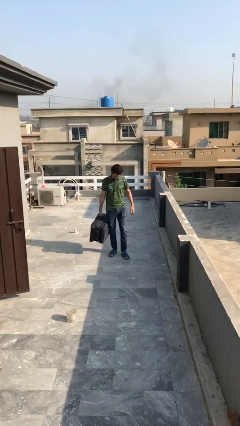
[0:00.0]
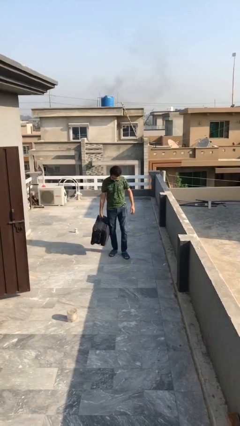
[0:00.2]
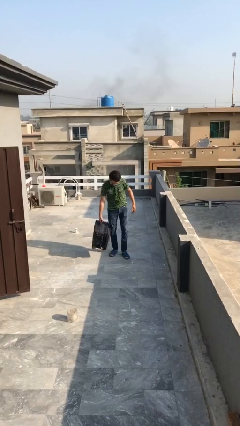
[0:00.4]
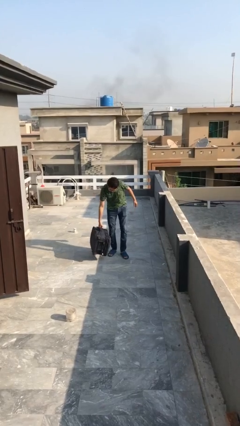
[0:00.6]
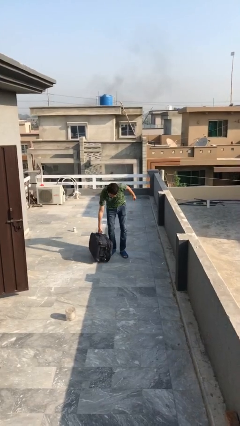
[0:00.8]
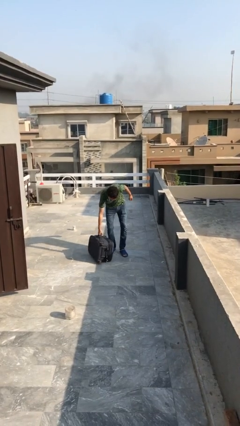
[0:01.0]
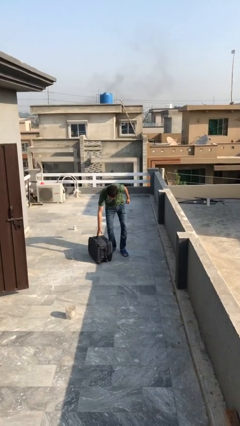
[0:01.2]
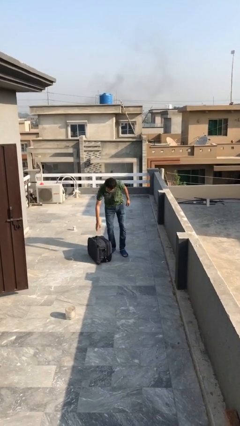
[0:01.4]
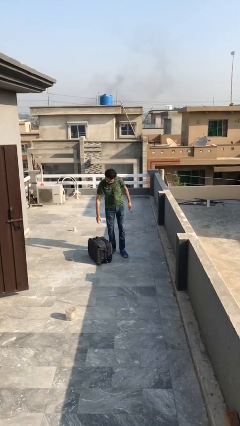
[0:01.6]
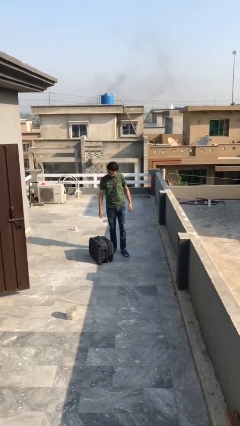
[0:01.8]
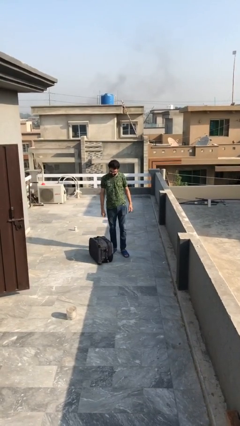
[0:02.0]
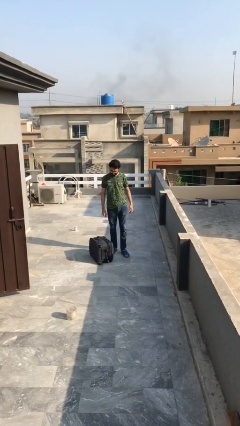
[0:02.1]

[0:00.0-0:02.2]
person puts down object on floor

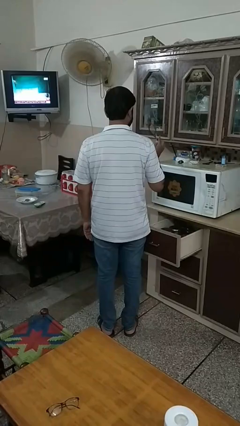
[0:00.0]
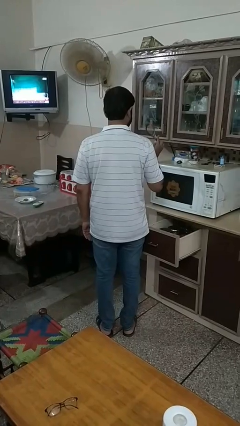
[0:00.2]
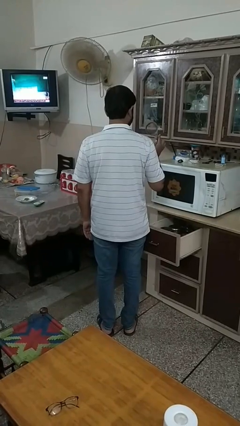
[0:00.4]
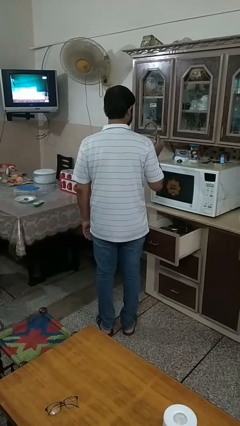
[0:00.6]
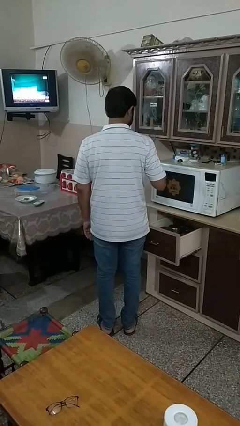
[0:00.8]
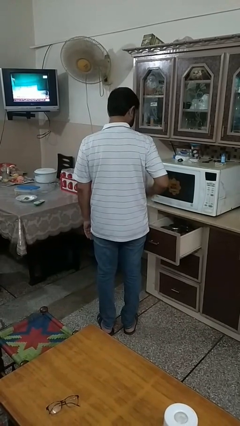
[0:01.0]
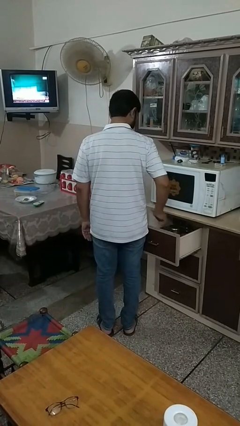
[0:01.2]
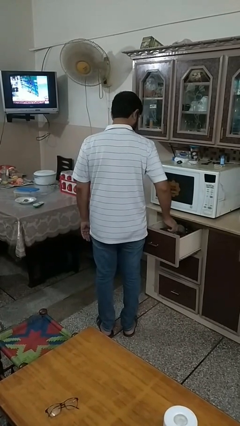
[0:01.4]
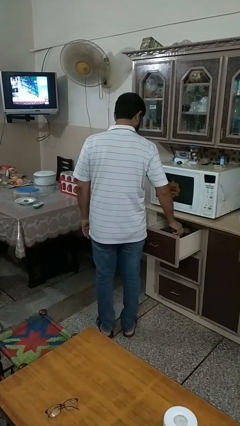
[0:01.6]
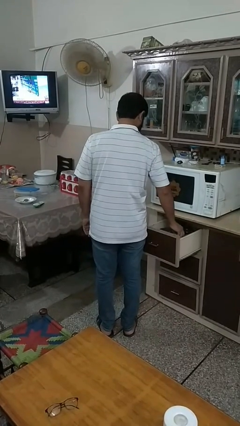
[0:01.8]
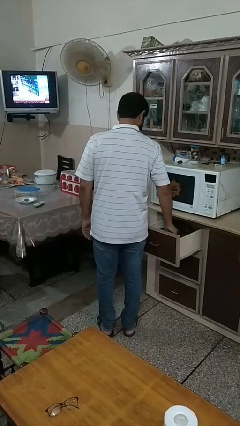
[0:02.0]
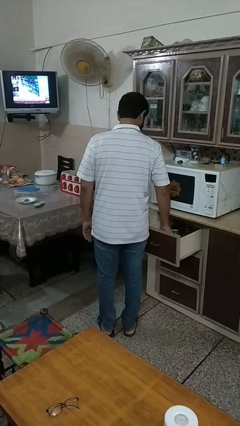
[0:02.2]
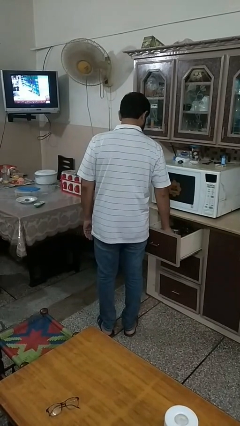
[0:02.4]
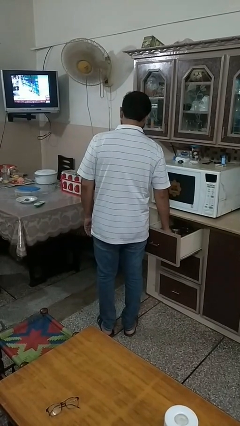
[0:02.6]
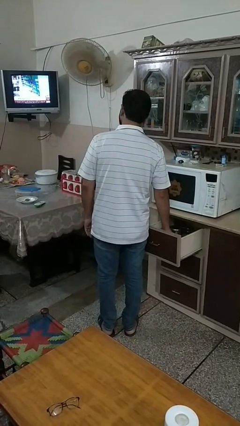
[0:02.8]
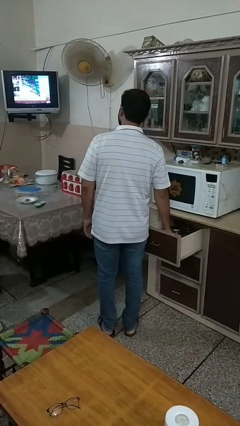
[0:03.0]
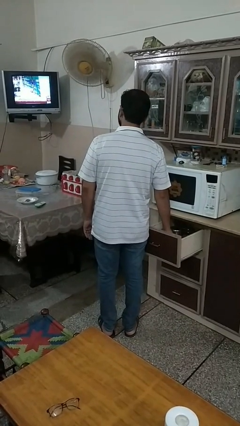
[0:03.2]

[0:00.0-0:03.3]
person puts object into kitchen drawer

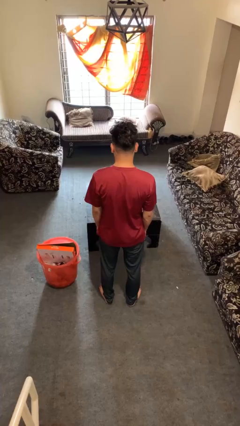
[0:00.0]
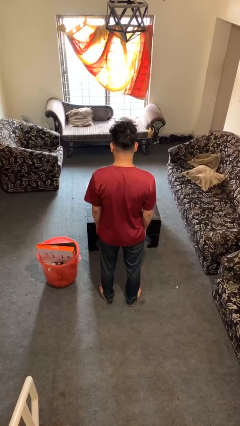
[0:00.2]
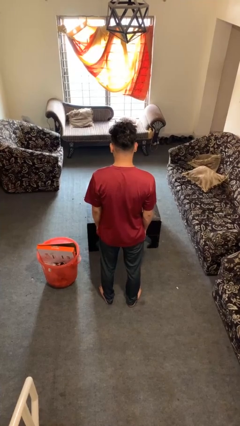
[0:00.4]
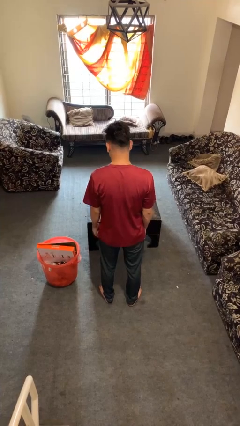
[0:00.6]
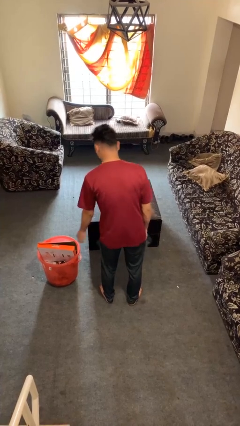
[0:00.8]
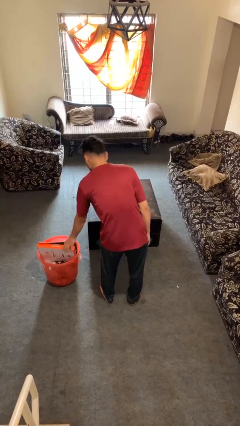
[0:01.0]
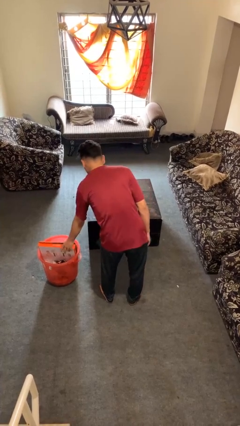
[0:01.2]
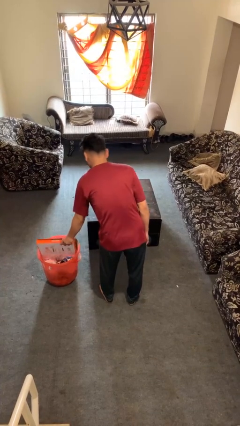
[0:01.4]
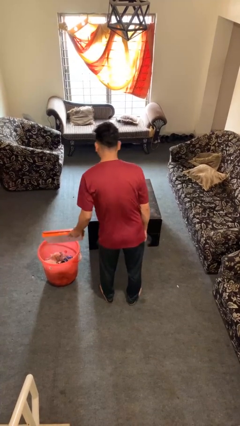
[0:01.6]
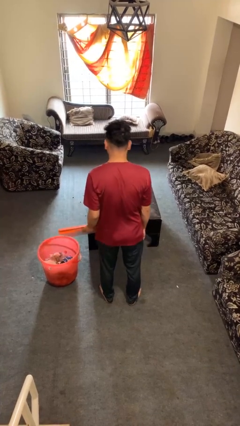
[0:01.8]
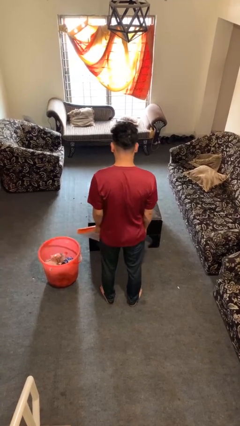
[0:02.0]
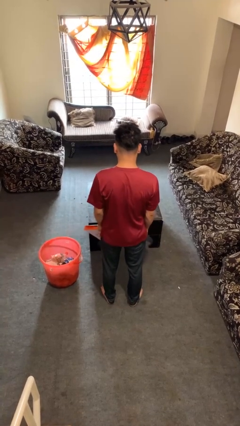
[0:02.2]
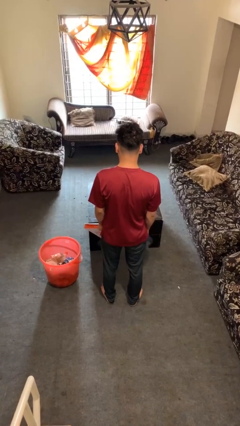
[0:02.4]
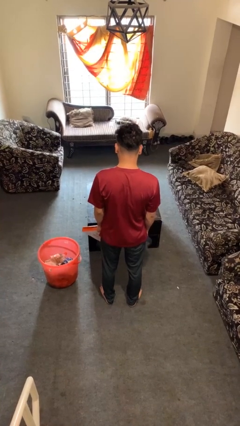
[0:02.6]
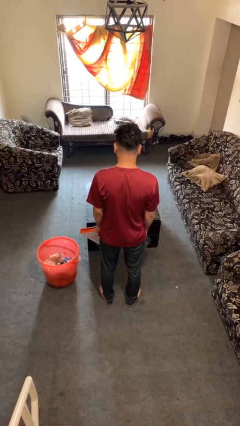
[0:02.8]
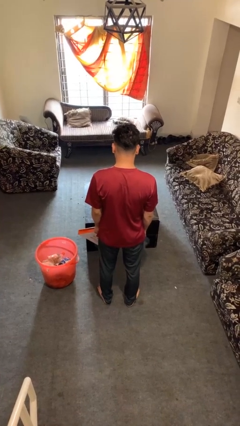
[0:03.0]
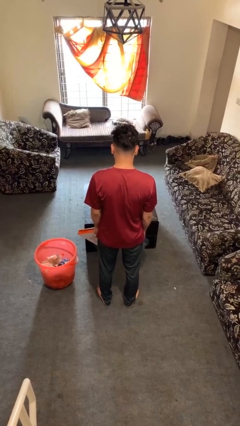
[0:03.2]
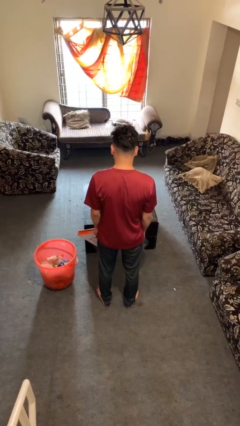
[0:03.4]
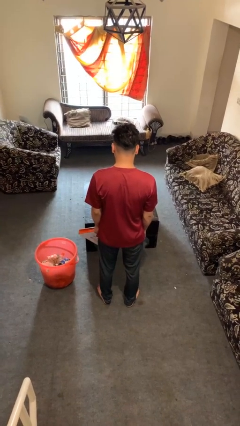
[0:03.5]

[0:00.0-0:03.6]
person takes object from basket

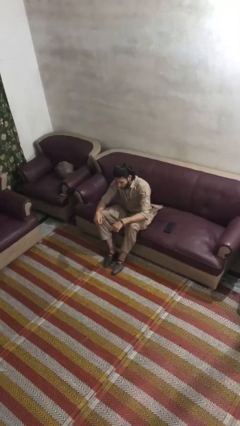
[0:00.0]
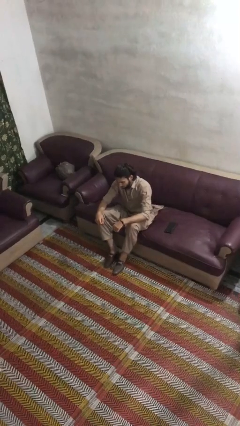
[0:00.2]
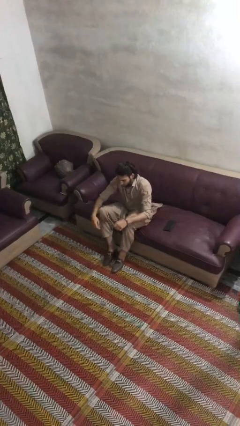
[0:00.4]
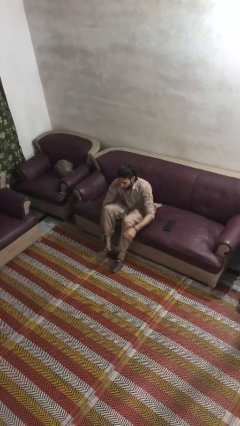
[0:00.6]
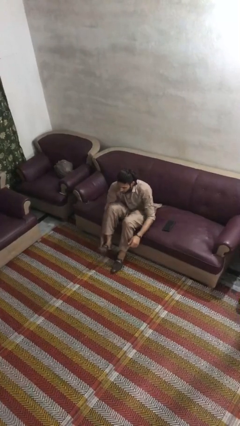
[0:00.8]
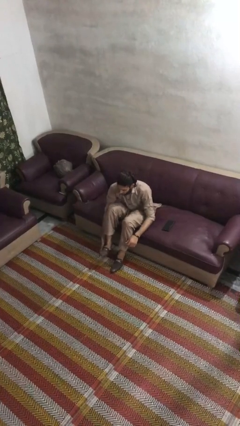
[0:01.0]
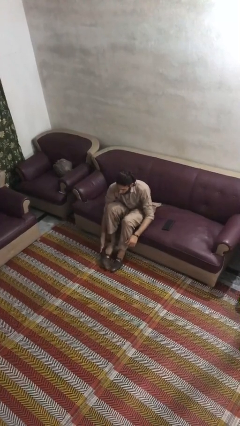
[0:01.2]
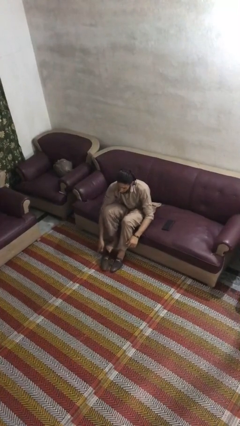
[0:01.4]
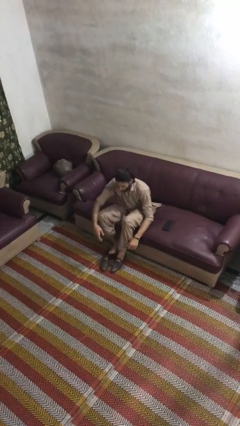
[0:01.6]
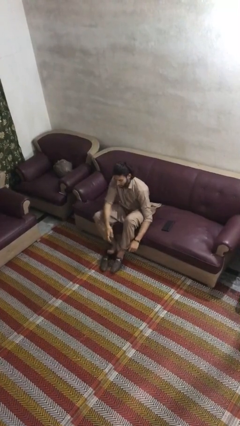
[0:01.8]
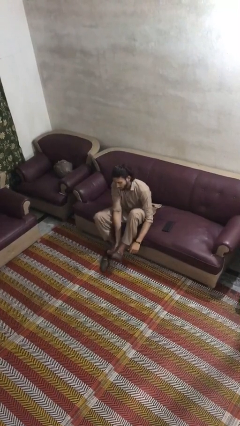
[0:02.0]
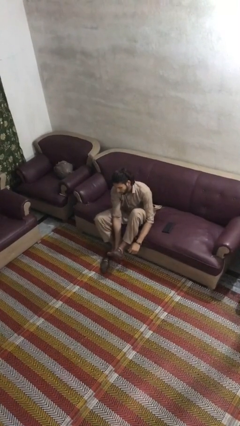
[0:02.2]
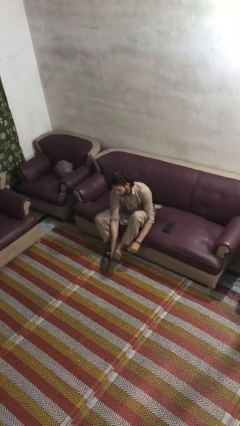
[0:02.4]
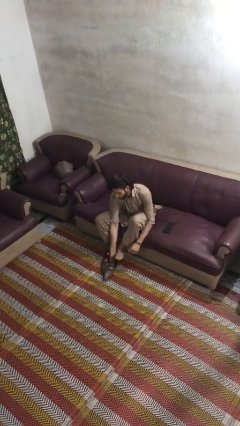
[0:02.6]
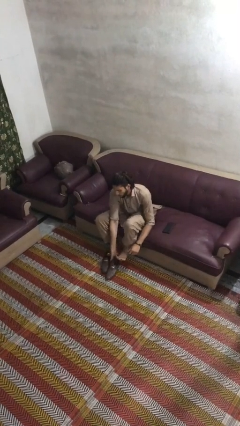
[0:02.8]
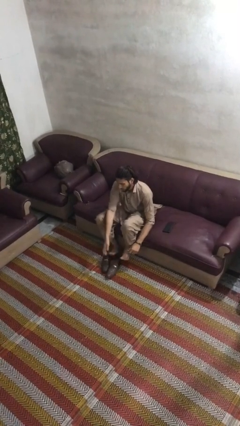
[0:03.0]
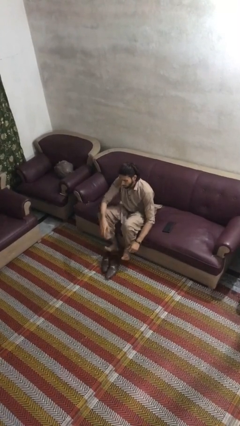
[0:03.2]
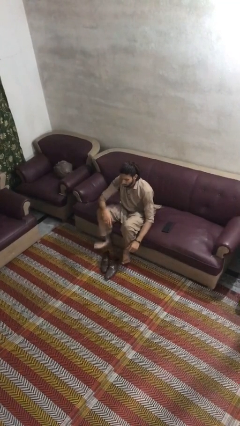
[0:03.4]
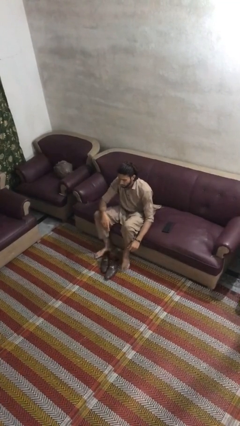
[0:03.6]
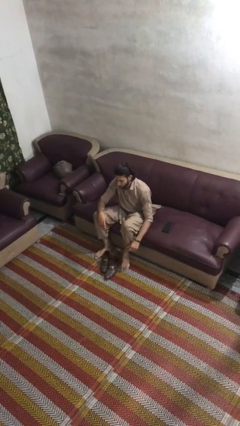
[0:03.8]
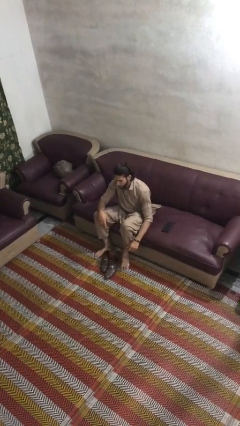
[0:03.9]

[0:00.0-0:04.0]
person takes off shoes

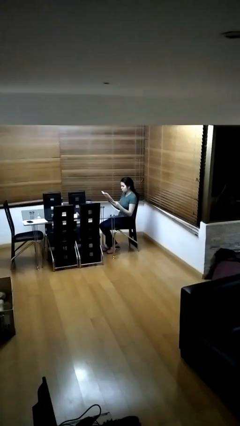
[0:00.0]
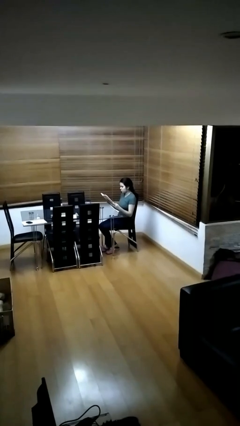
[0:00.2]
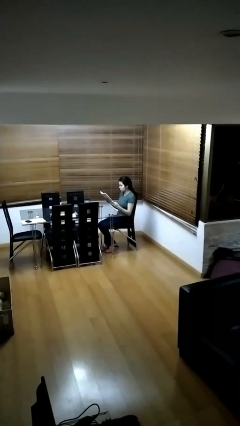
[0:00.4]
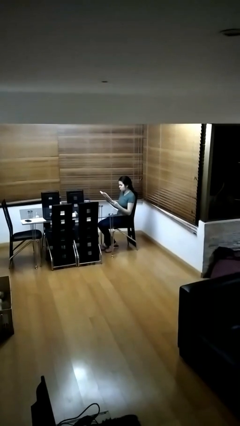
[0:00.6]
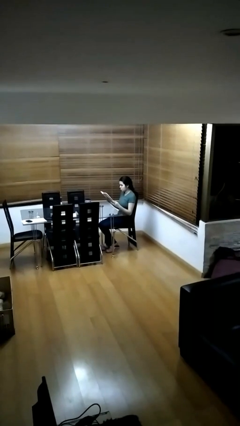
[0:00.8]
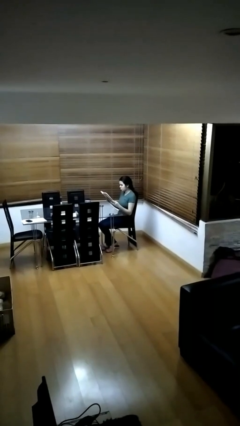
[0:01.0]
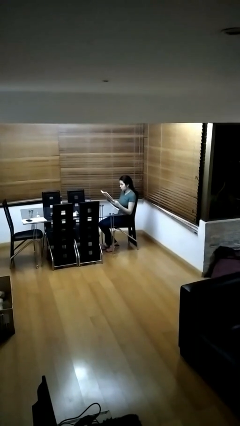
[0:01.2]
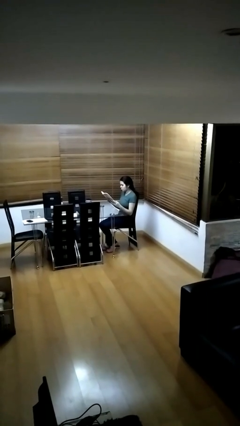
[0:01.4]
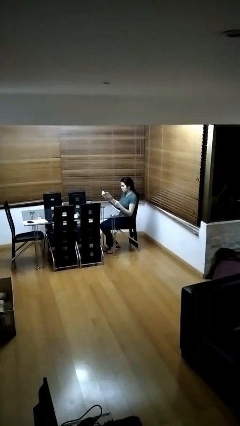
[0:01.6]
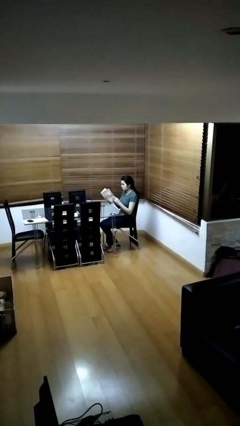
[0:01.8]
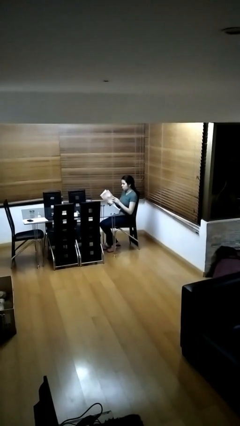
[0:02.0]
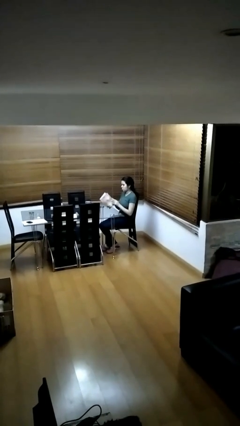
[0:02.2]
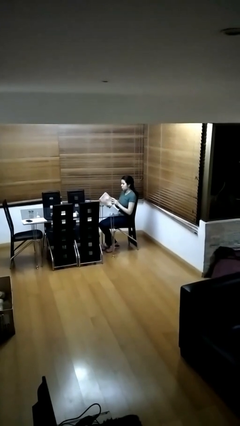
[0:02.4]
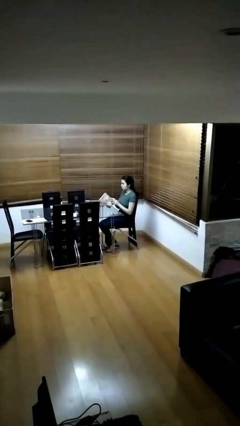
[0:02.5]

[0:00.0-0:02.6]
person reads document

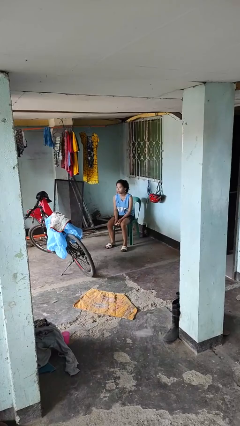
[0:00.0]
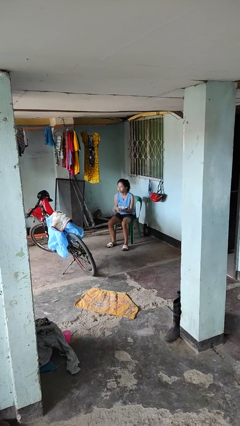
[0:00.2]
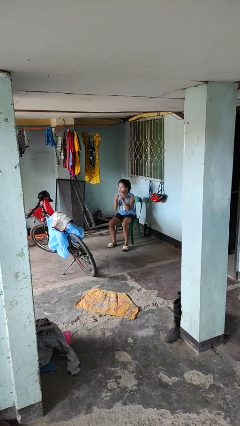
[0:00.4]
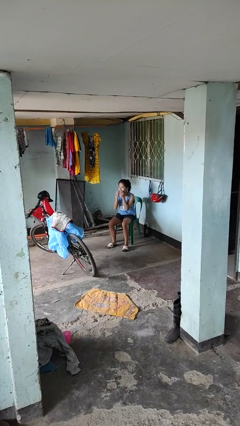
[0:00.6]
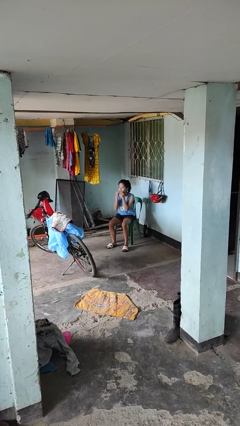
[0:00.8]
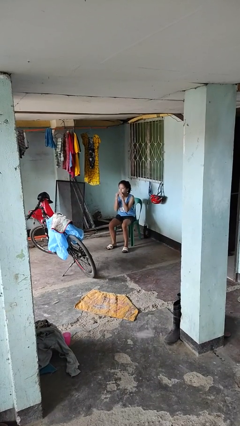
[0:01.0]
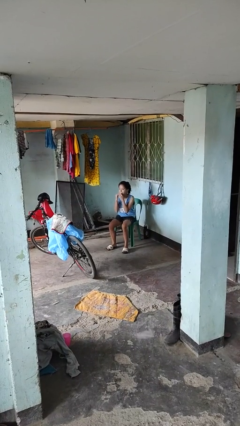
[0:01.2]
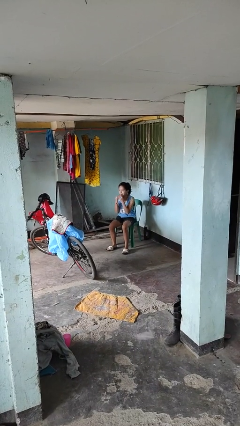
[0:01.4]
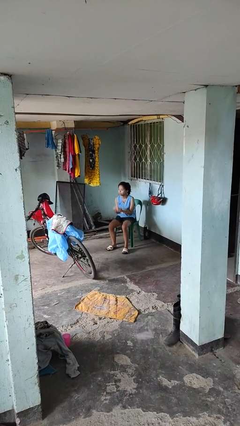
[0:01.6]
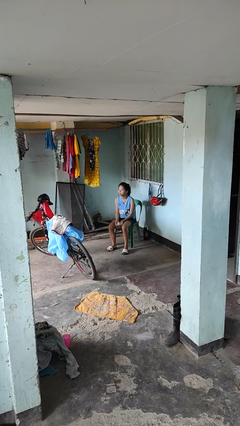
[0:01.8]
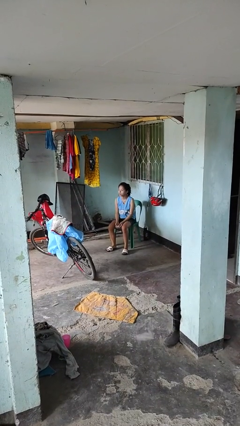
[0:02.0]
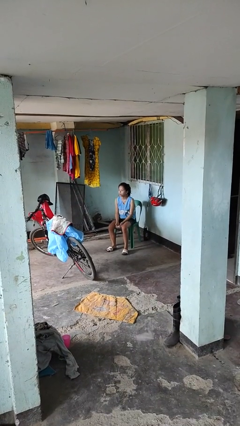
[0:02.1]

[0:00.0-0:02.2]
person wipes mouth with napkin
